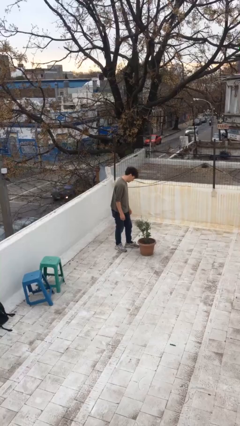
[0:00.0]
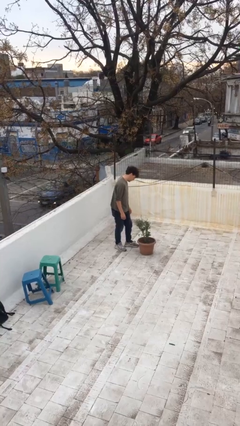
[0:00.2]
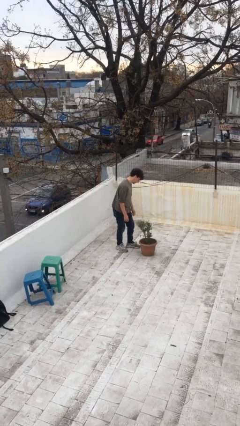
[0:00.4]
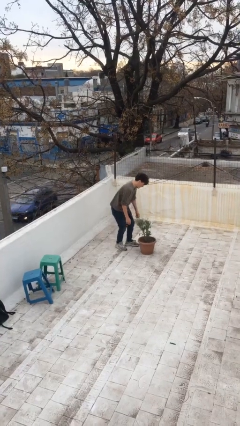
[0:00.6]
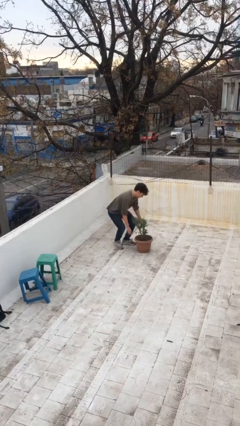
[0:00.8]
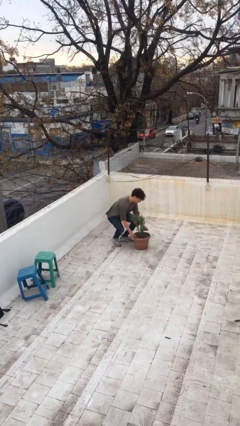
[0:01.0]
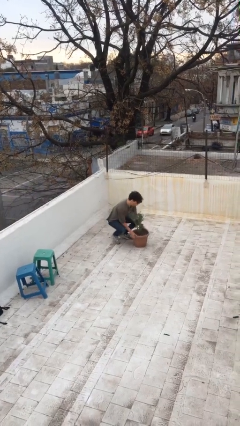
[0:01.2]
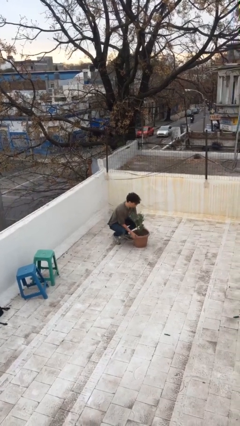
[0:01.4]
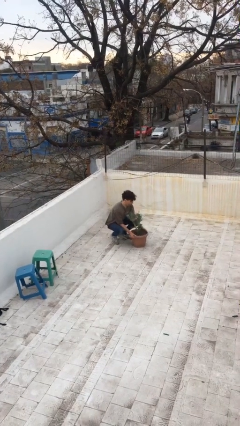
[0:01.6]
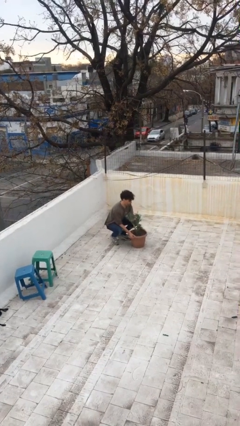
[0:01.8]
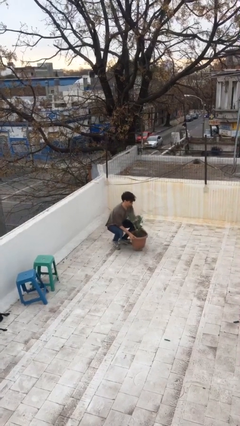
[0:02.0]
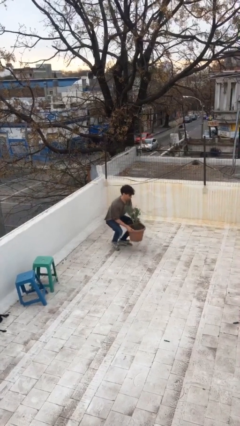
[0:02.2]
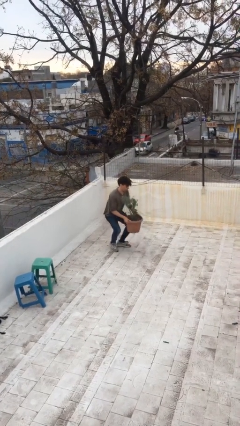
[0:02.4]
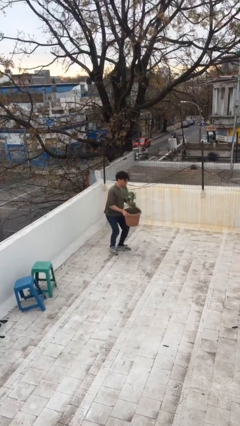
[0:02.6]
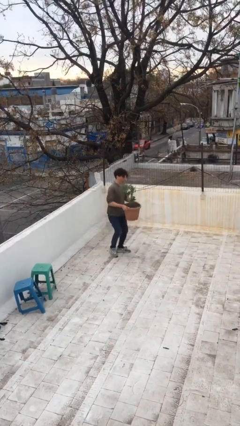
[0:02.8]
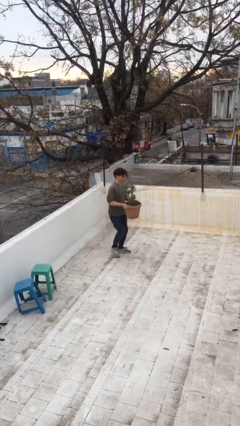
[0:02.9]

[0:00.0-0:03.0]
person picks up object from floor

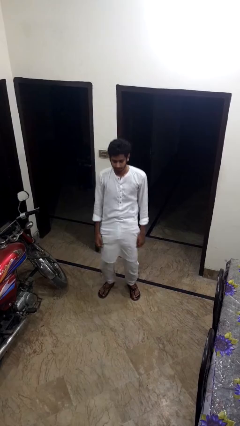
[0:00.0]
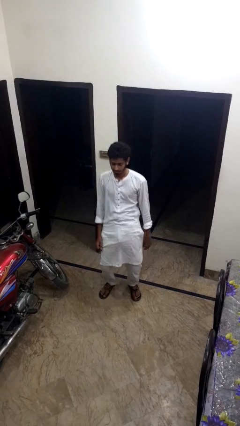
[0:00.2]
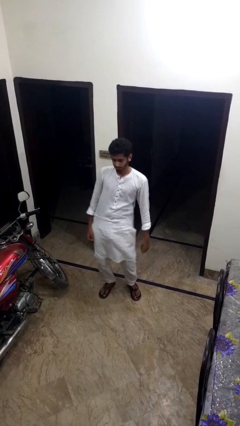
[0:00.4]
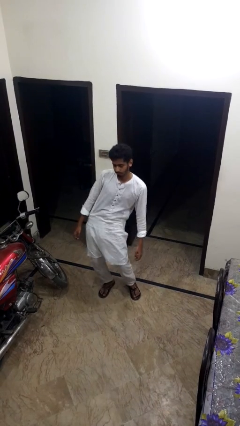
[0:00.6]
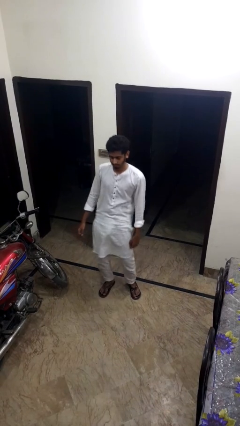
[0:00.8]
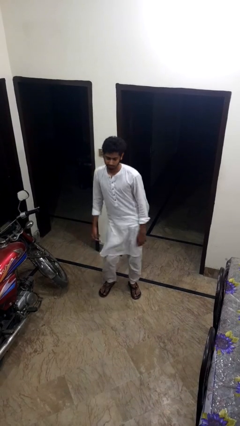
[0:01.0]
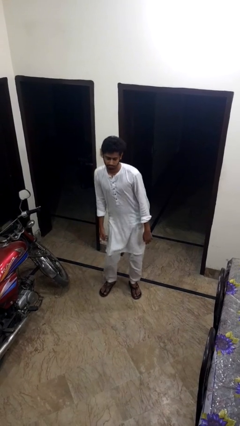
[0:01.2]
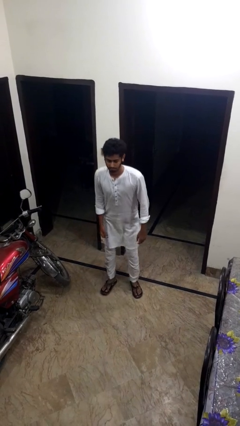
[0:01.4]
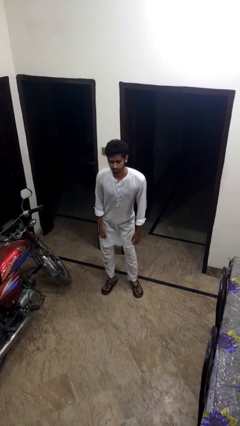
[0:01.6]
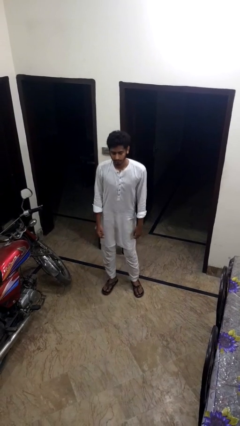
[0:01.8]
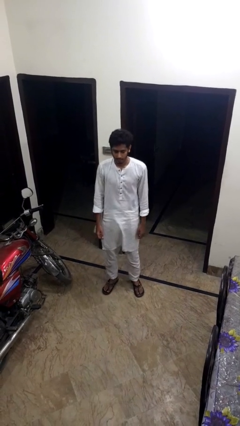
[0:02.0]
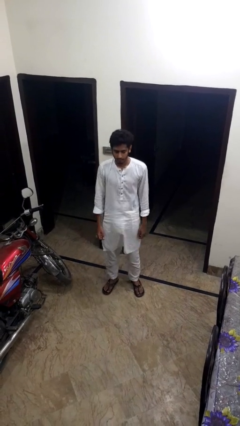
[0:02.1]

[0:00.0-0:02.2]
person wiggles hips

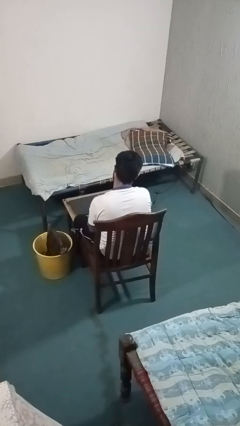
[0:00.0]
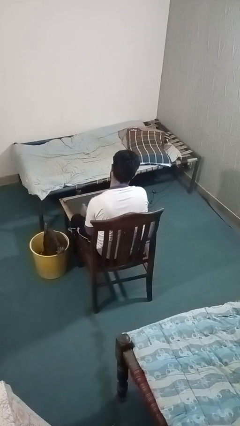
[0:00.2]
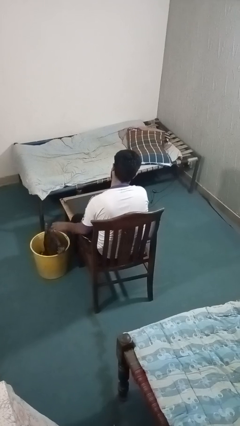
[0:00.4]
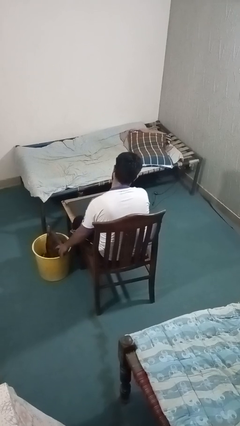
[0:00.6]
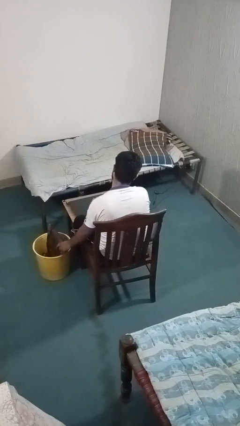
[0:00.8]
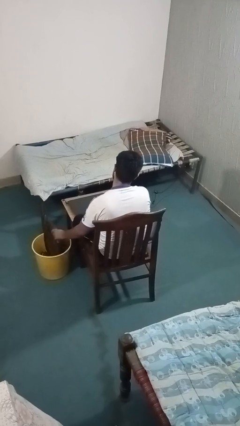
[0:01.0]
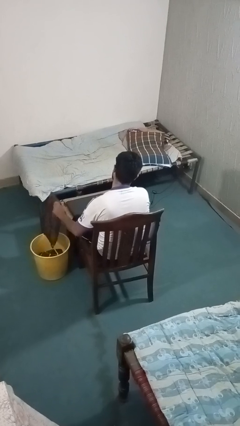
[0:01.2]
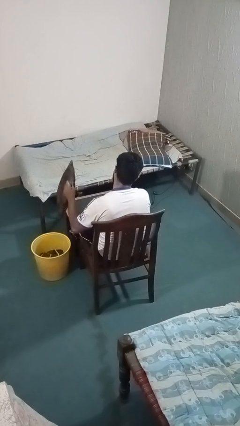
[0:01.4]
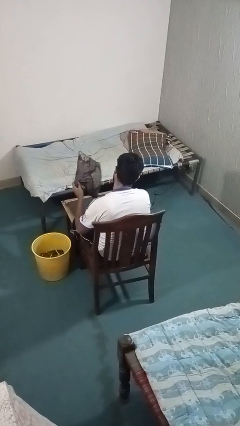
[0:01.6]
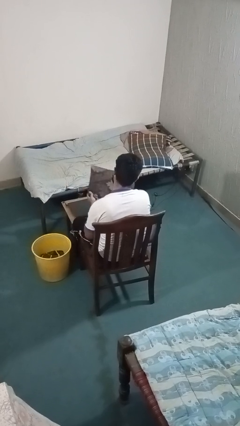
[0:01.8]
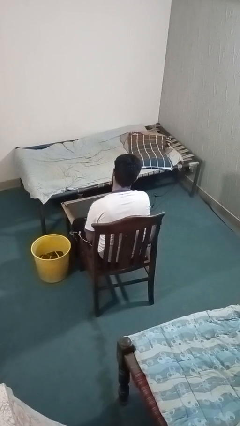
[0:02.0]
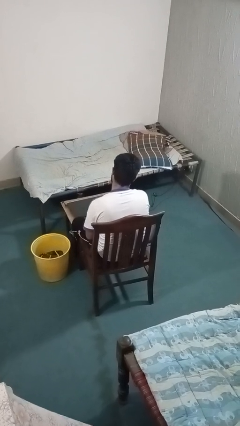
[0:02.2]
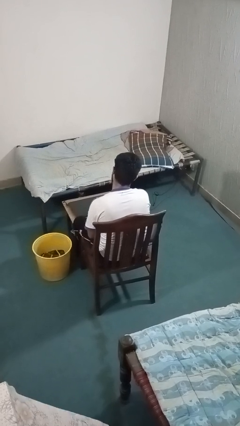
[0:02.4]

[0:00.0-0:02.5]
person takes object from basket

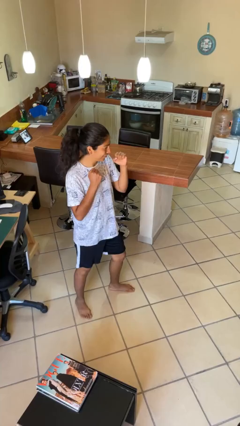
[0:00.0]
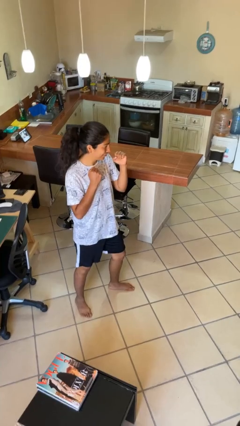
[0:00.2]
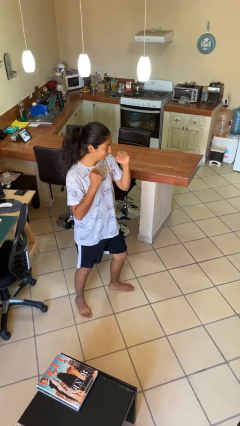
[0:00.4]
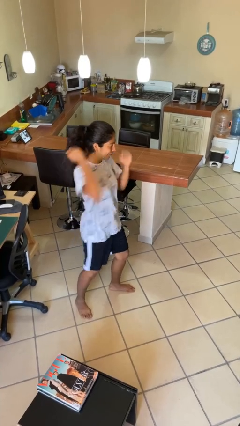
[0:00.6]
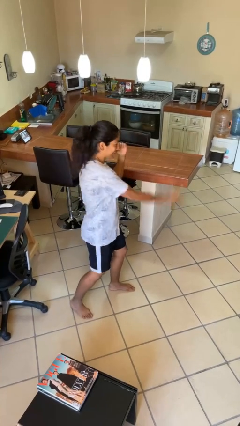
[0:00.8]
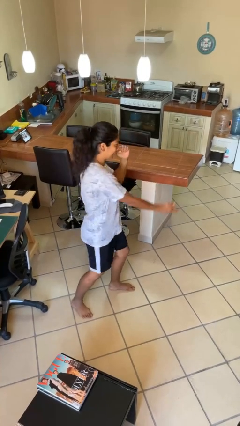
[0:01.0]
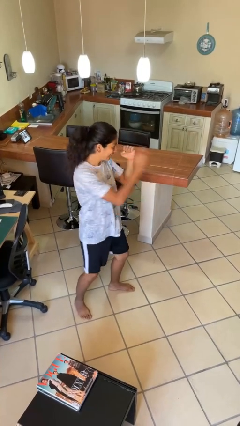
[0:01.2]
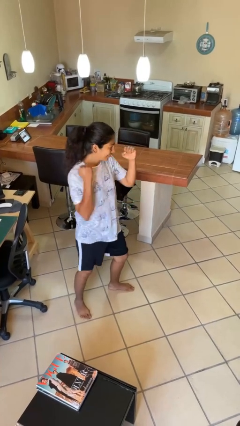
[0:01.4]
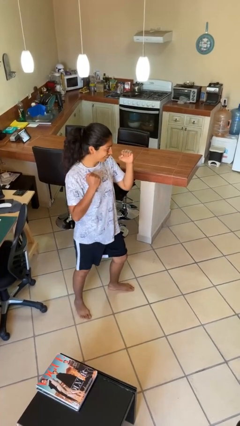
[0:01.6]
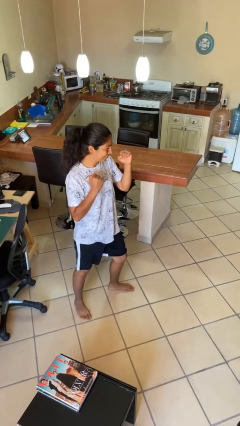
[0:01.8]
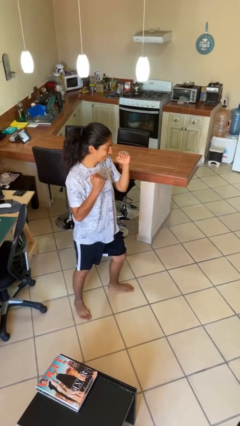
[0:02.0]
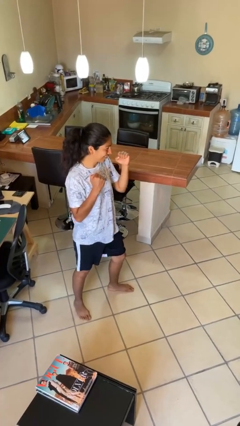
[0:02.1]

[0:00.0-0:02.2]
person karate chop

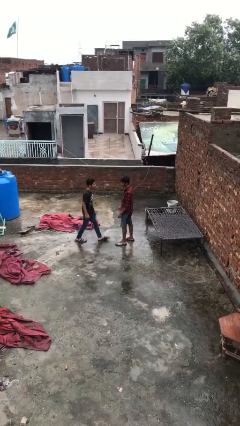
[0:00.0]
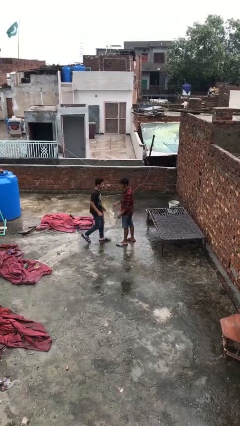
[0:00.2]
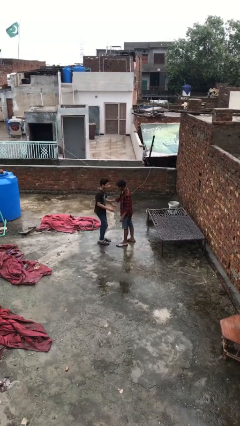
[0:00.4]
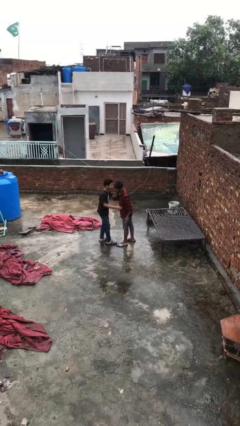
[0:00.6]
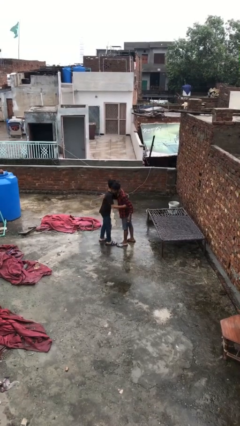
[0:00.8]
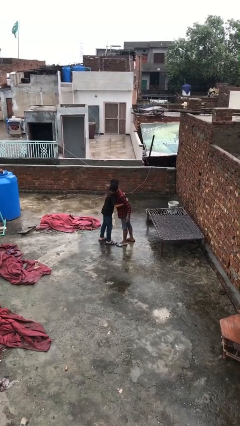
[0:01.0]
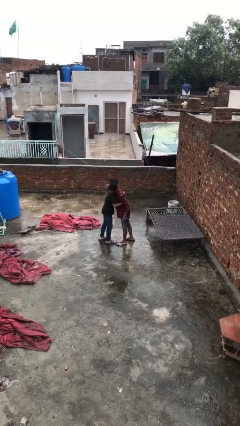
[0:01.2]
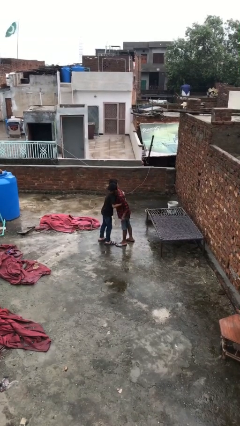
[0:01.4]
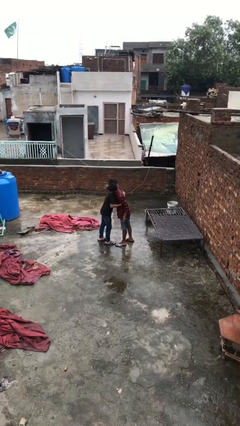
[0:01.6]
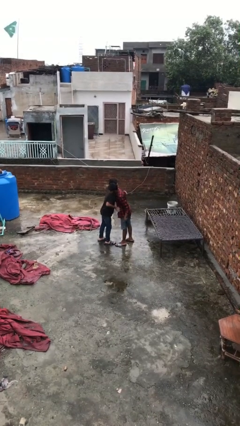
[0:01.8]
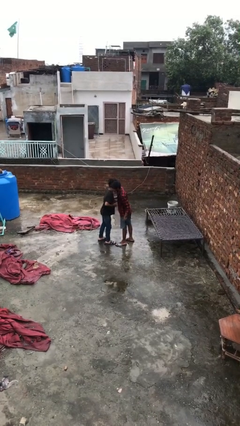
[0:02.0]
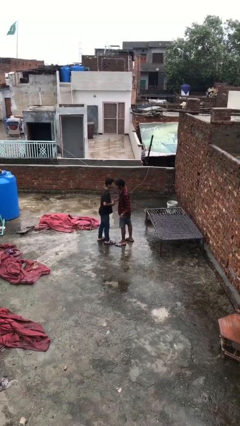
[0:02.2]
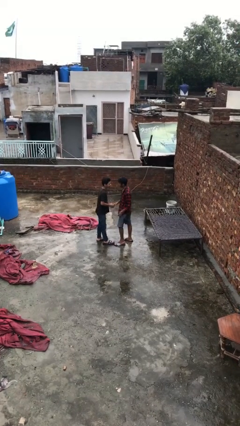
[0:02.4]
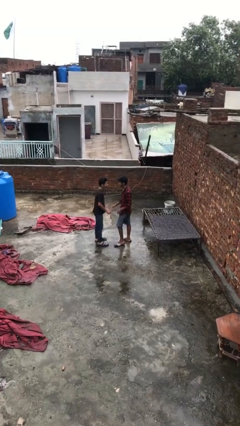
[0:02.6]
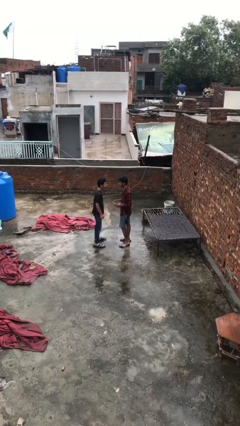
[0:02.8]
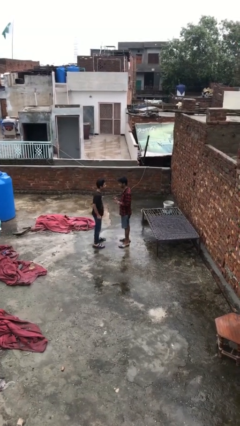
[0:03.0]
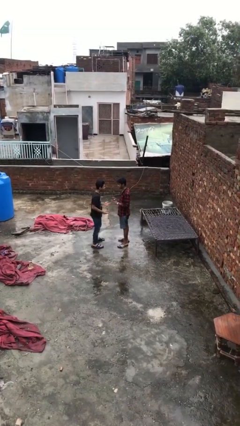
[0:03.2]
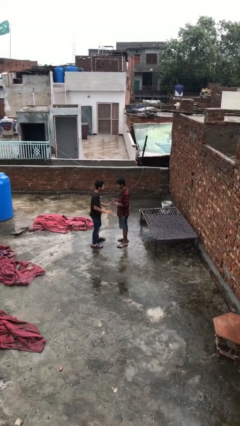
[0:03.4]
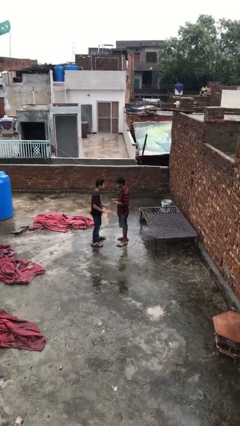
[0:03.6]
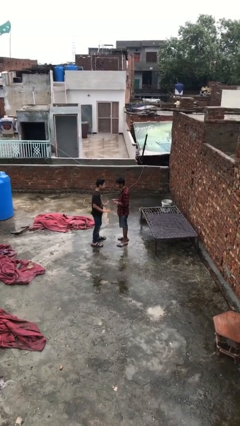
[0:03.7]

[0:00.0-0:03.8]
person embraces person

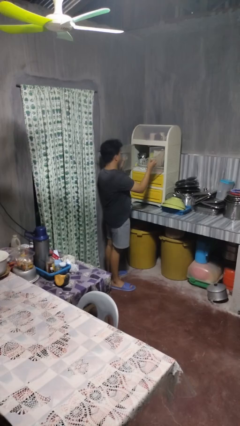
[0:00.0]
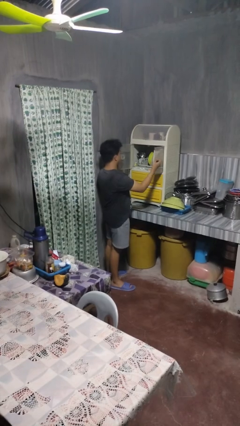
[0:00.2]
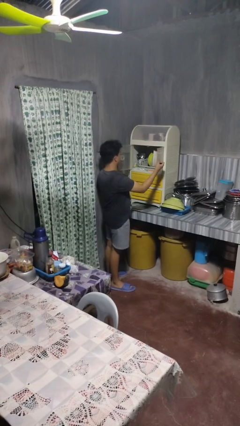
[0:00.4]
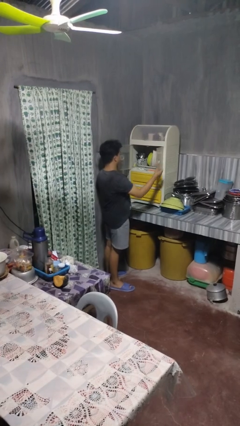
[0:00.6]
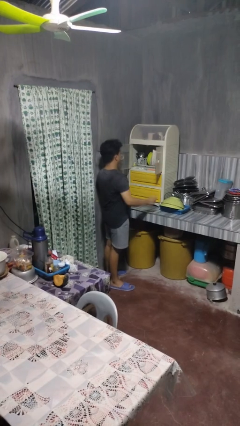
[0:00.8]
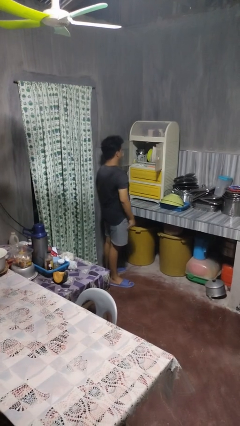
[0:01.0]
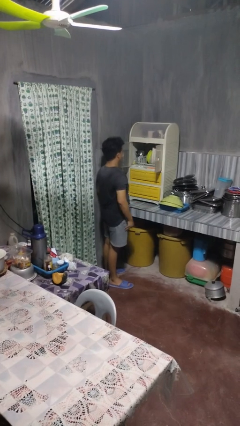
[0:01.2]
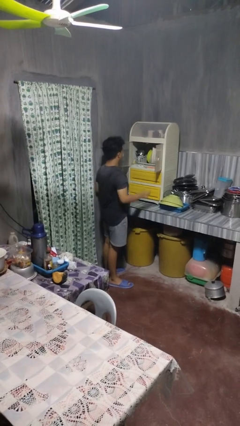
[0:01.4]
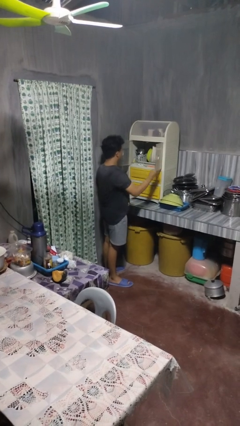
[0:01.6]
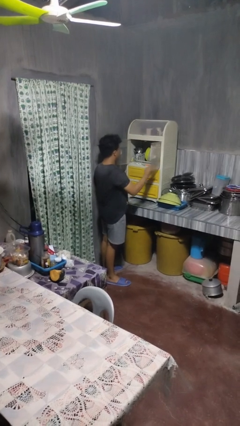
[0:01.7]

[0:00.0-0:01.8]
person opens cabinet

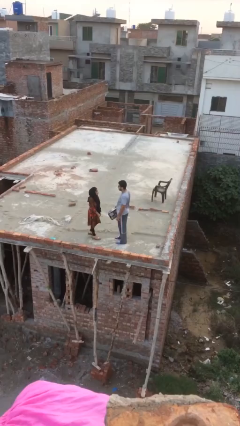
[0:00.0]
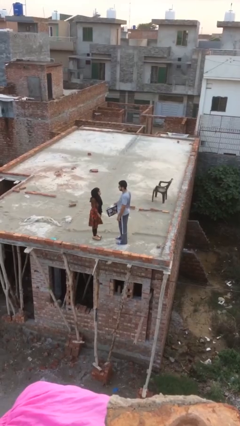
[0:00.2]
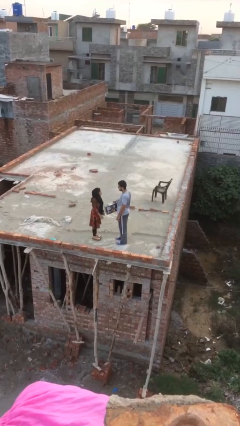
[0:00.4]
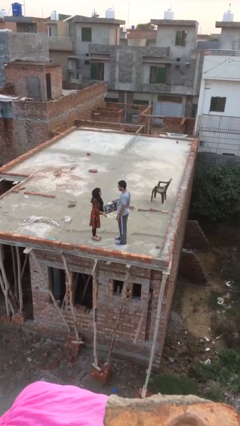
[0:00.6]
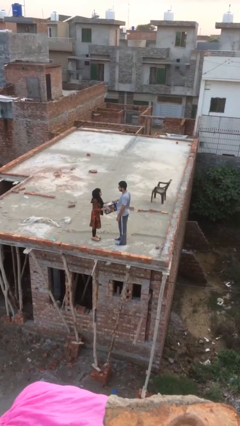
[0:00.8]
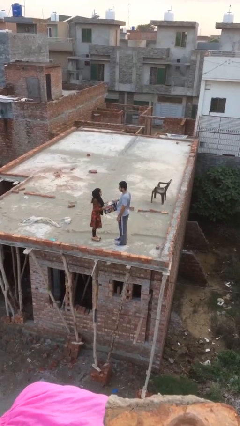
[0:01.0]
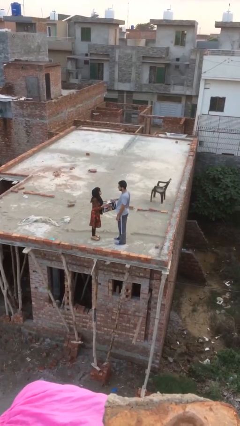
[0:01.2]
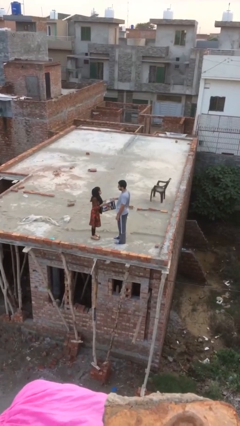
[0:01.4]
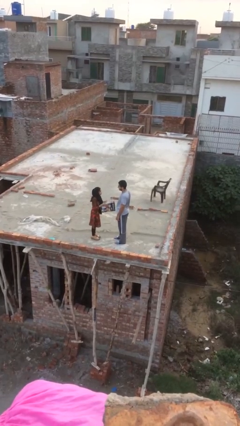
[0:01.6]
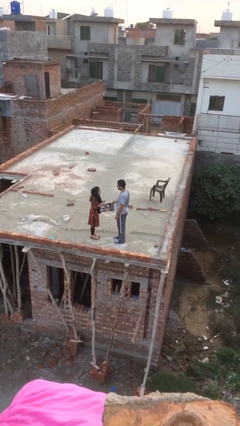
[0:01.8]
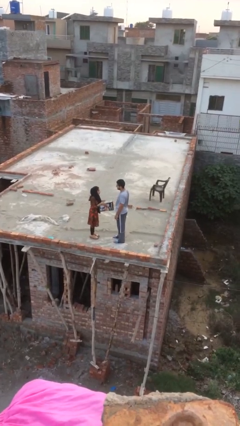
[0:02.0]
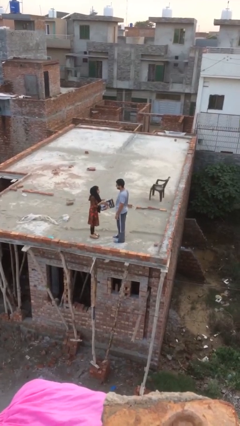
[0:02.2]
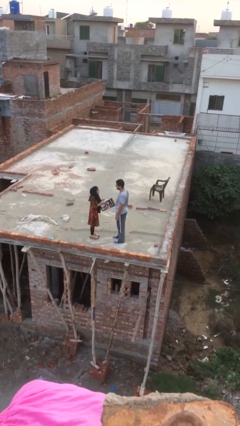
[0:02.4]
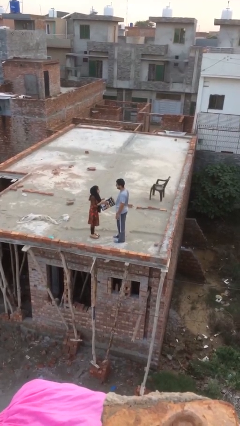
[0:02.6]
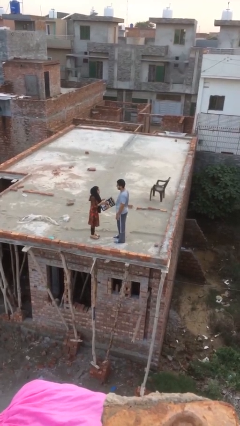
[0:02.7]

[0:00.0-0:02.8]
person transfers object to person
